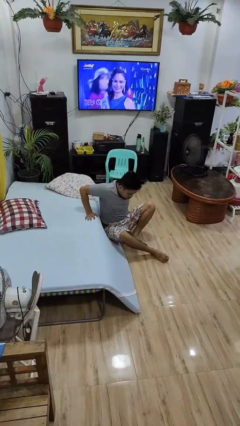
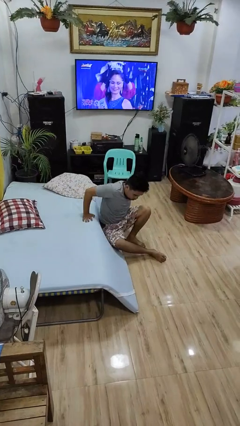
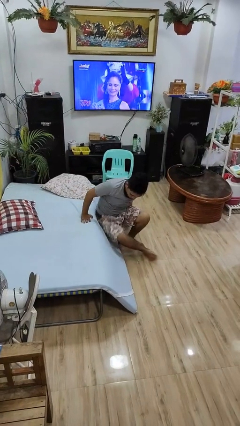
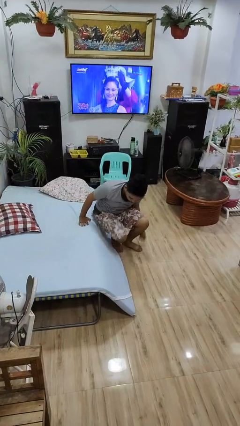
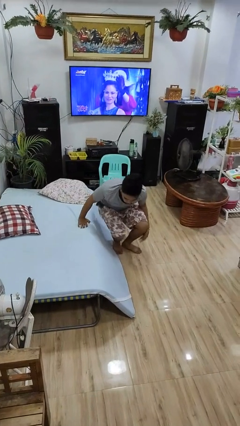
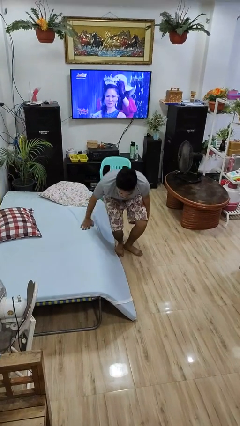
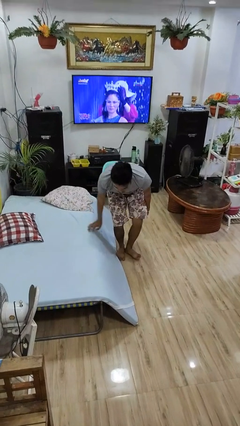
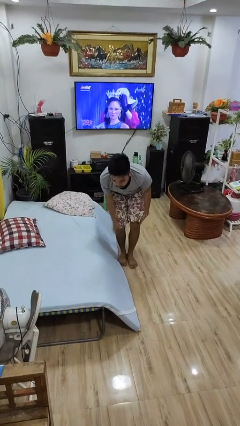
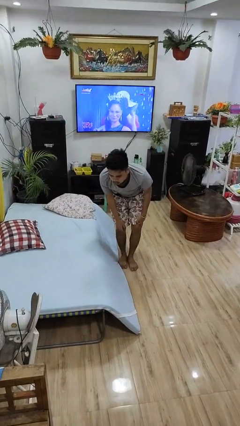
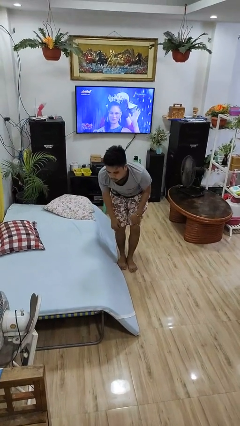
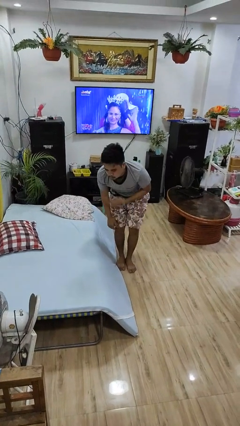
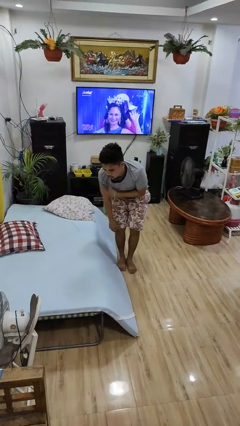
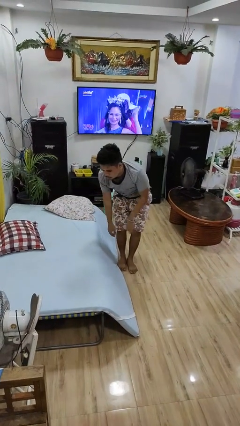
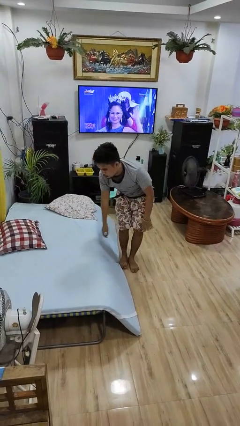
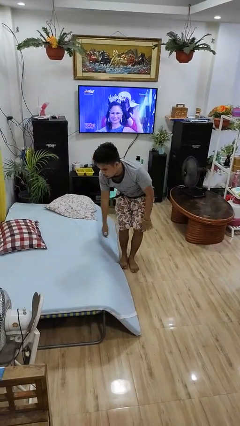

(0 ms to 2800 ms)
person stands up from floor

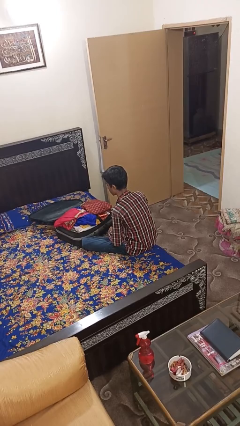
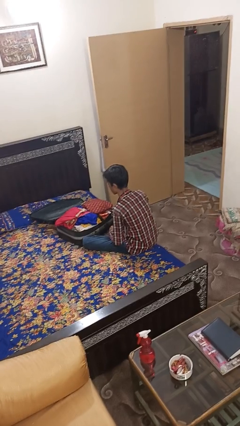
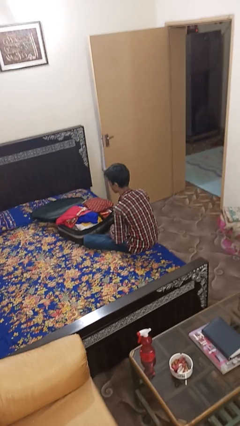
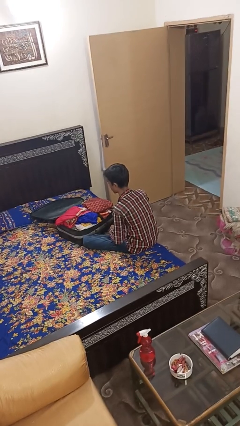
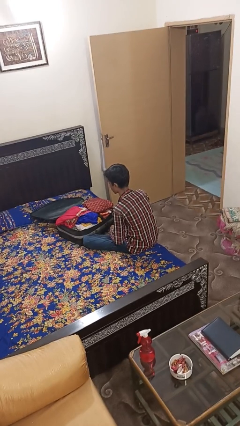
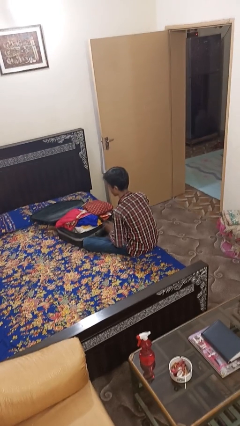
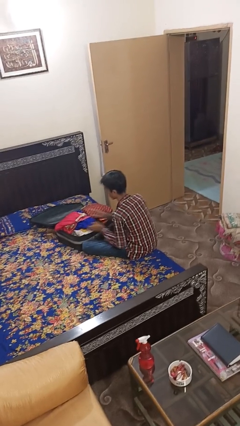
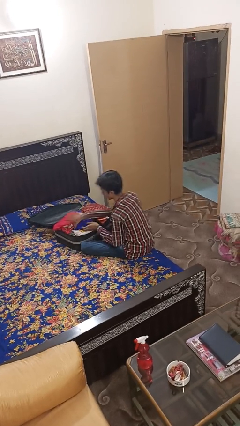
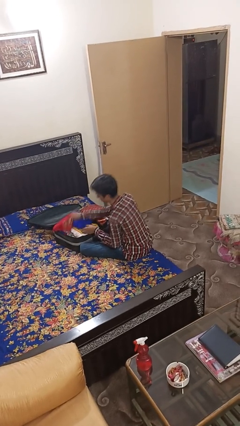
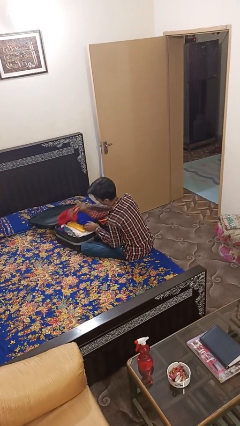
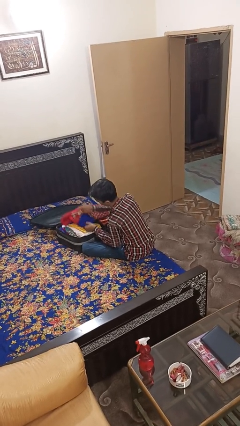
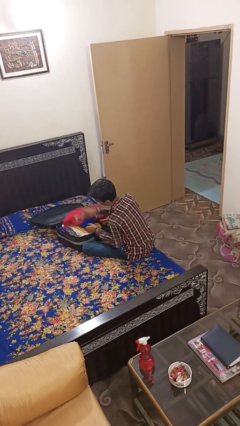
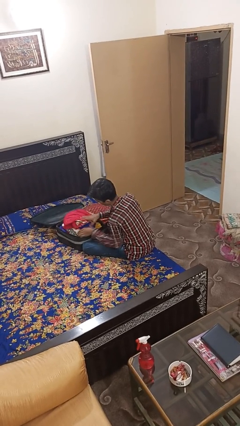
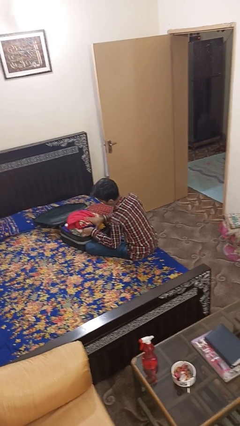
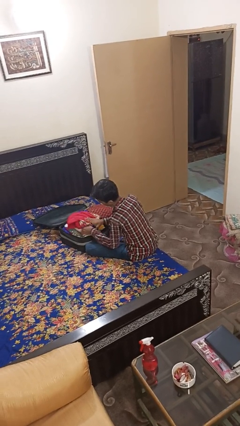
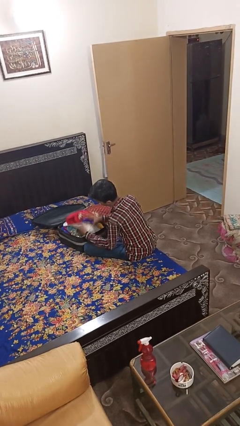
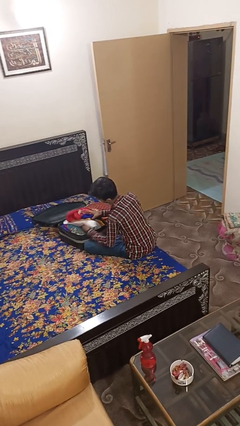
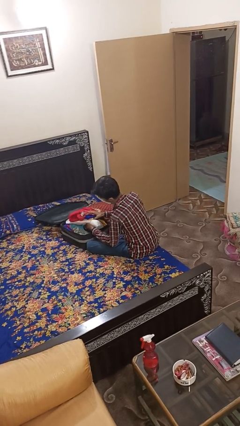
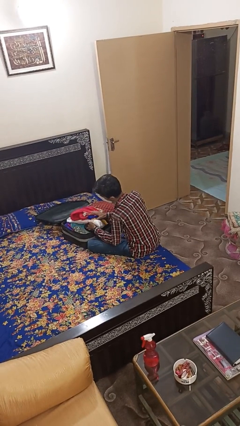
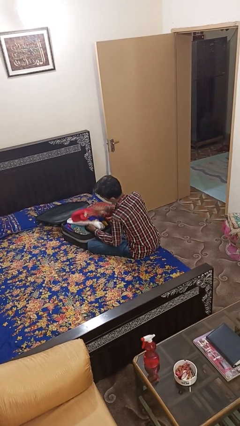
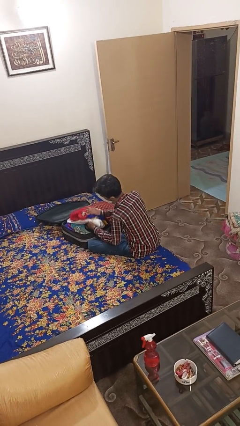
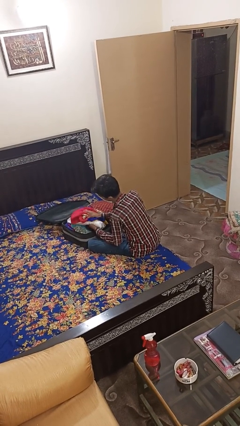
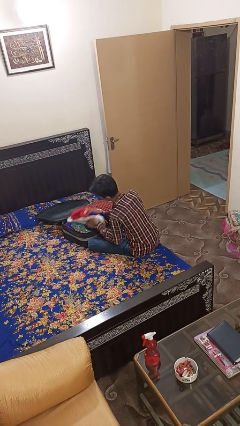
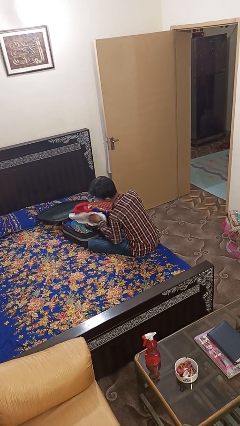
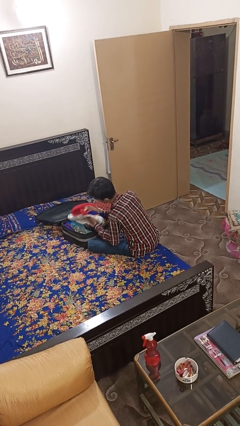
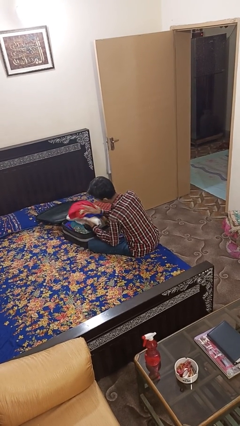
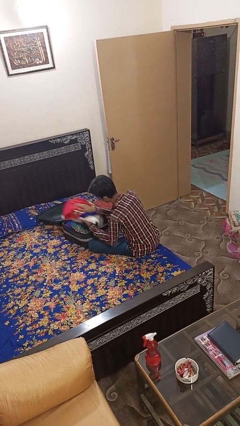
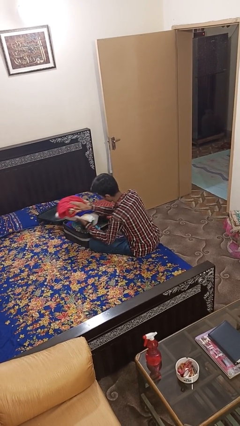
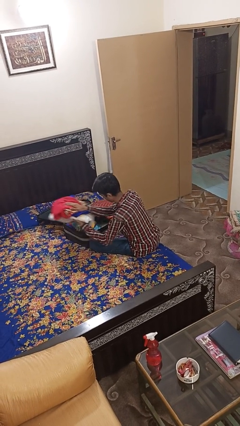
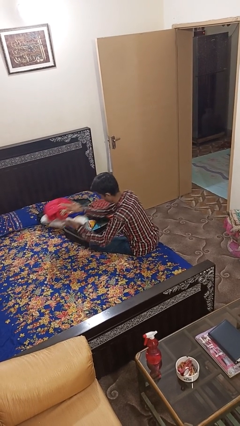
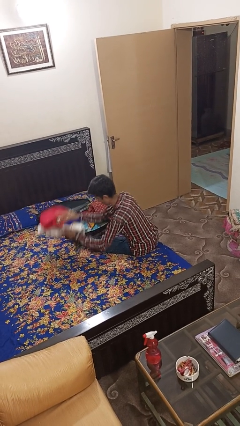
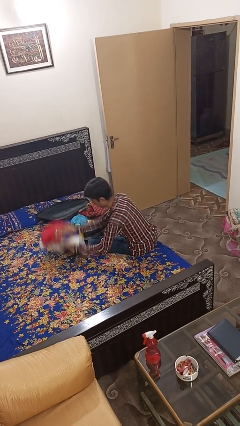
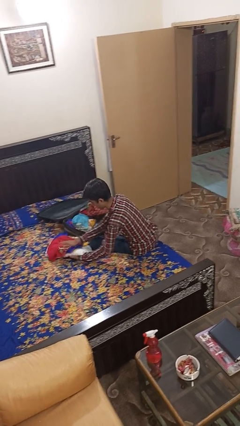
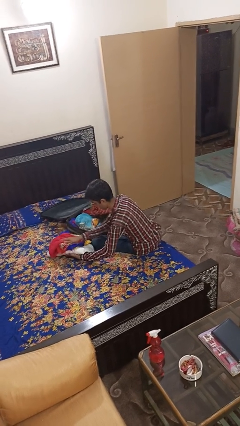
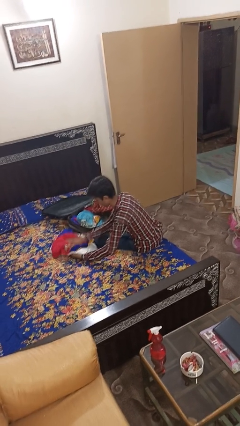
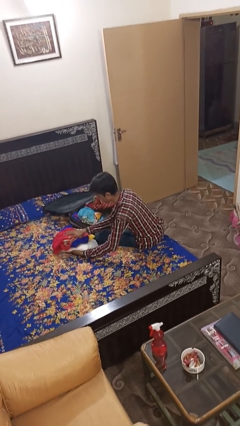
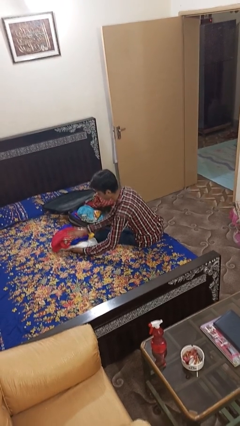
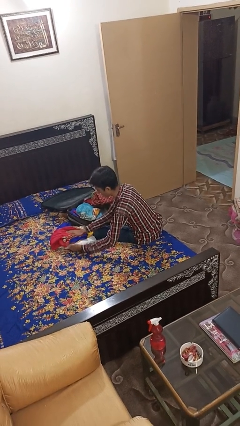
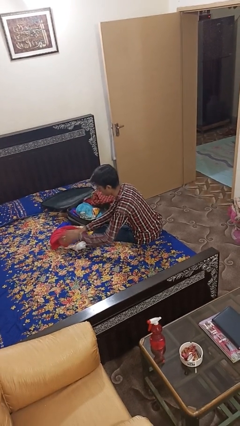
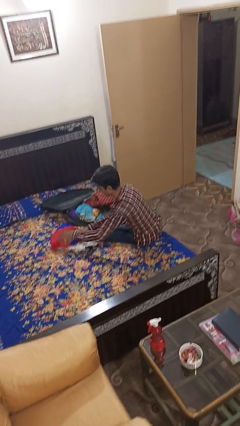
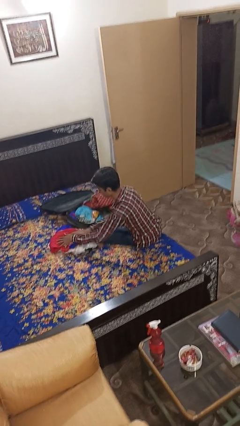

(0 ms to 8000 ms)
person unloads clothes from suitcase

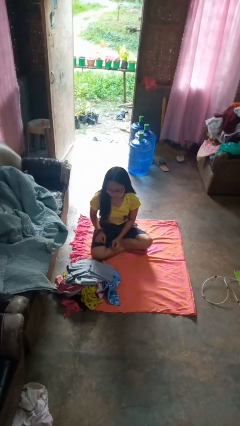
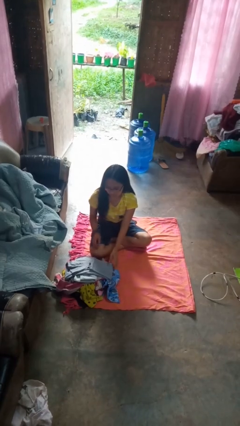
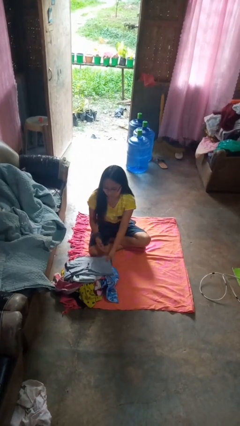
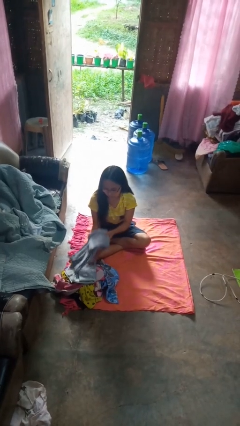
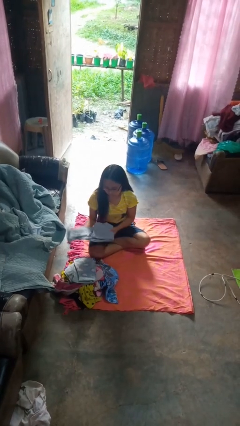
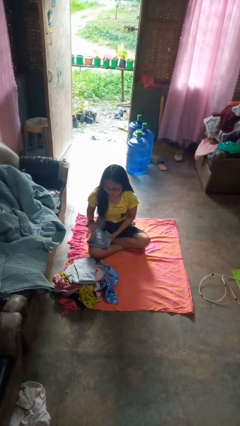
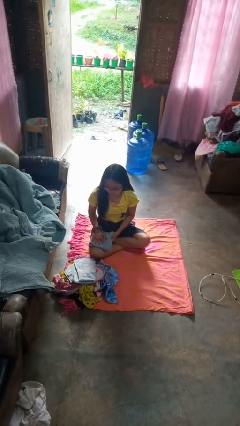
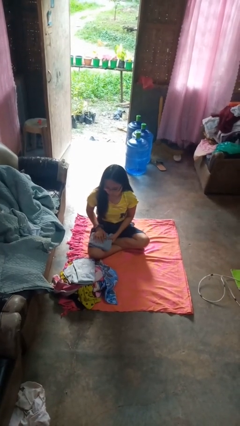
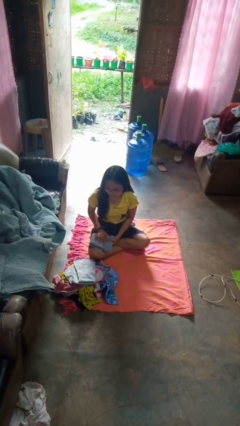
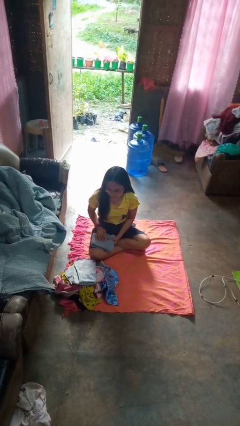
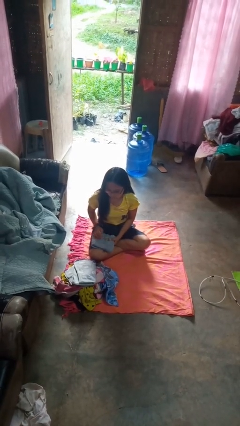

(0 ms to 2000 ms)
person folds shirt

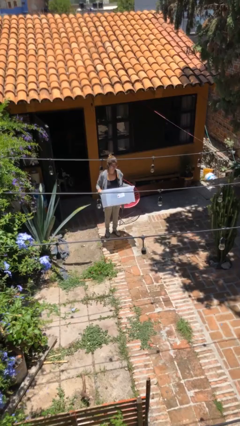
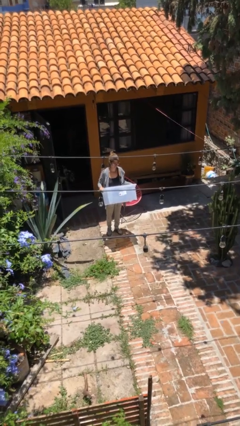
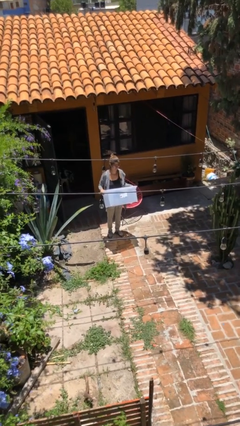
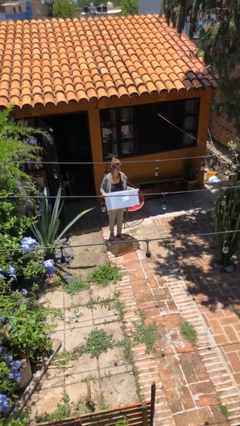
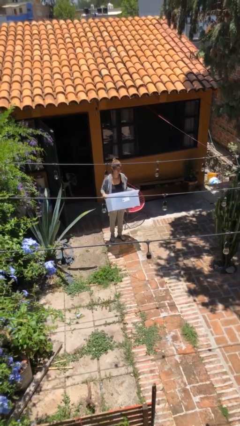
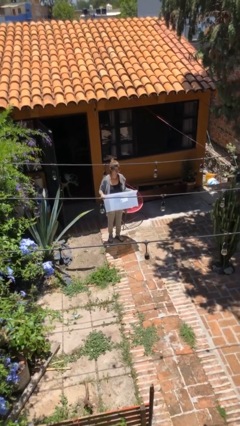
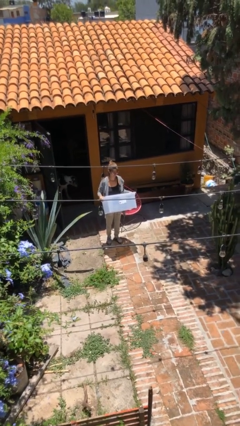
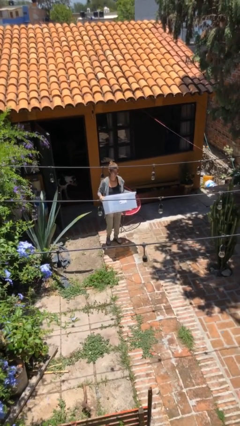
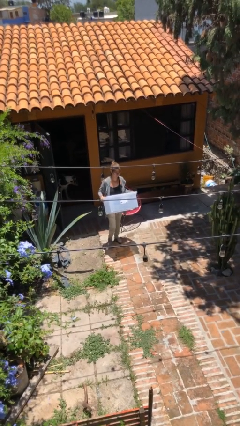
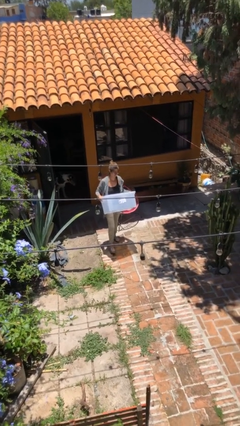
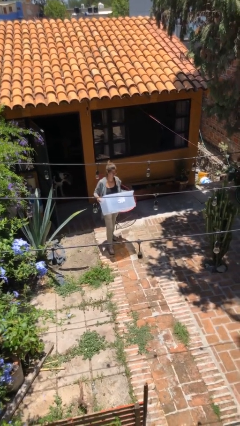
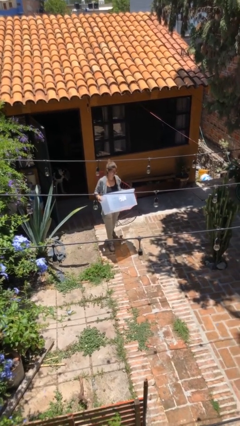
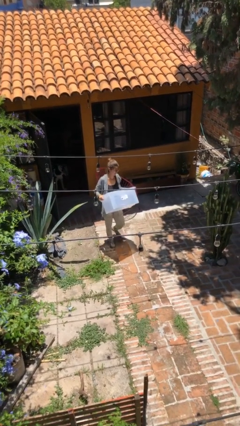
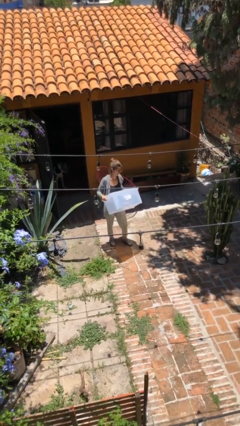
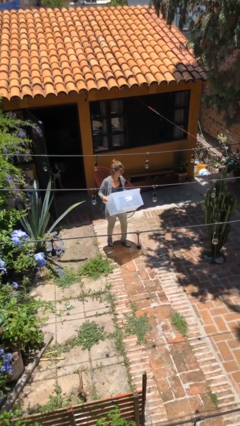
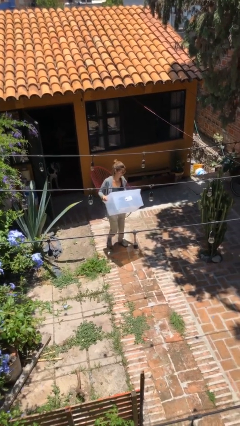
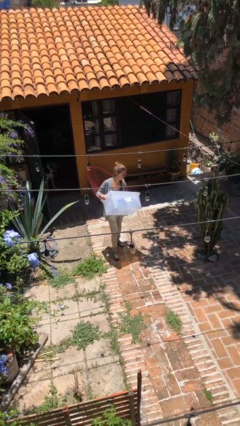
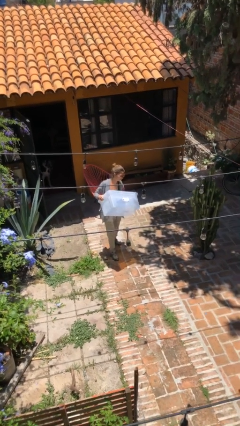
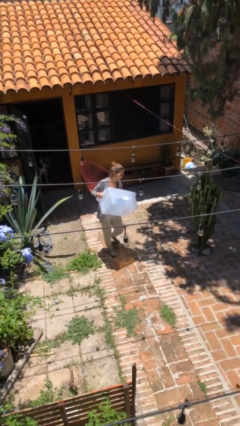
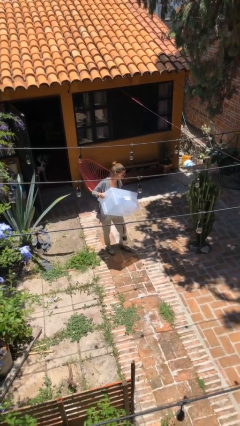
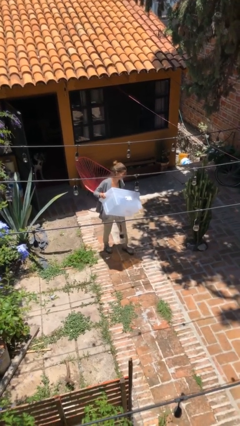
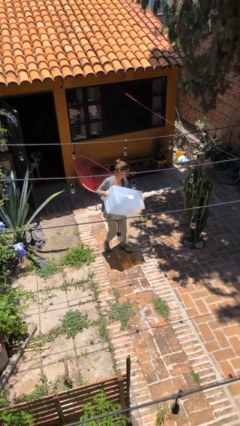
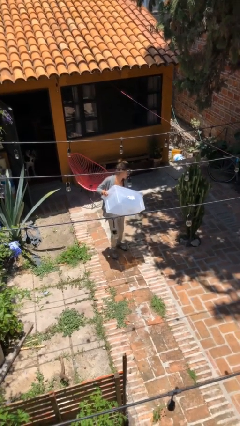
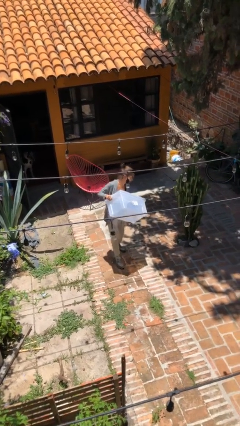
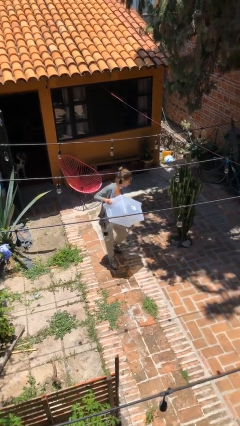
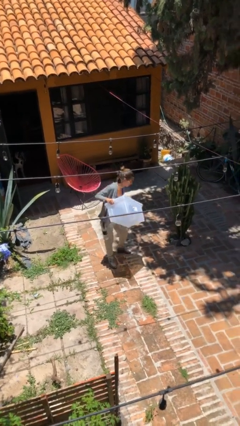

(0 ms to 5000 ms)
person carries heavy object
